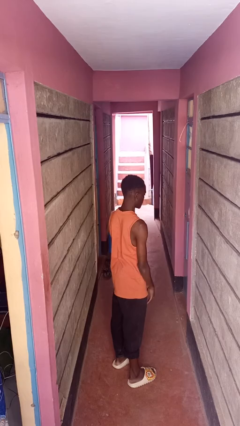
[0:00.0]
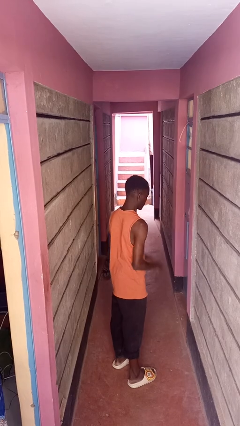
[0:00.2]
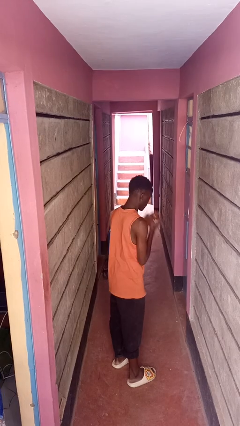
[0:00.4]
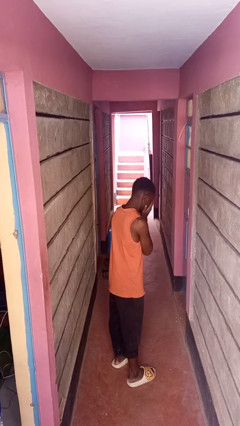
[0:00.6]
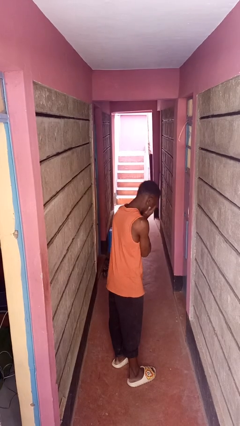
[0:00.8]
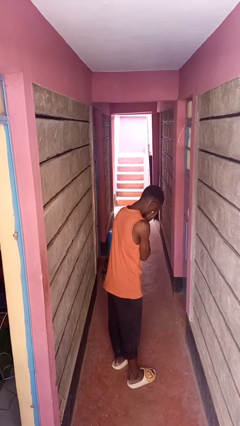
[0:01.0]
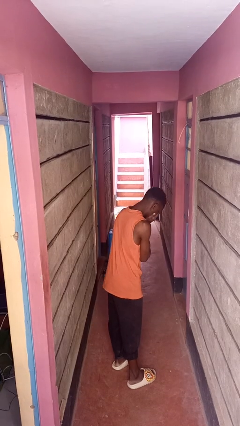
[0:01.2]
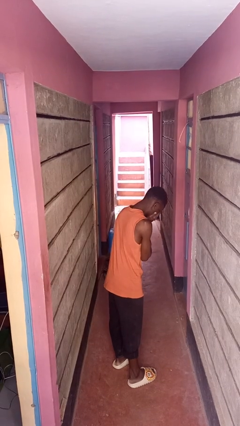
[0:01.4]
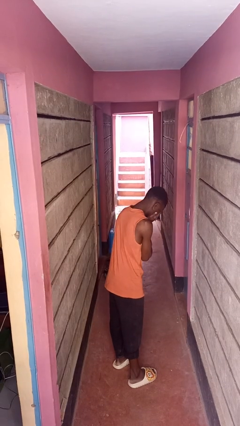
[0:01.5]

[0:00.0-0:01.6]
person sneezes into hand

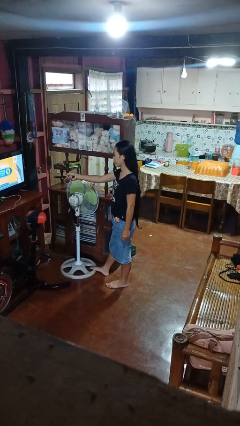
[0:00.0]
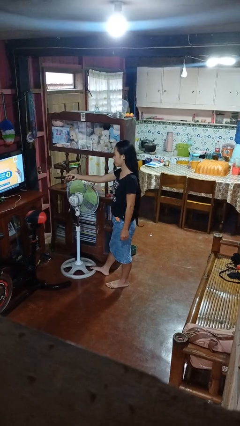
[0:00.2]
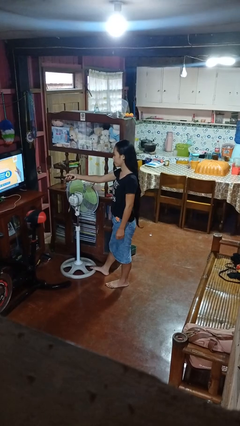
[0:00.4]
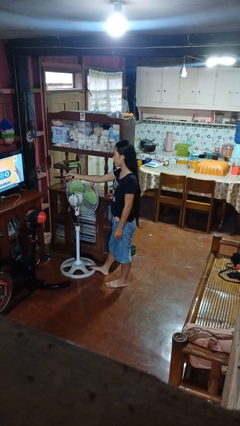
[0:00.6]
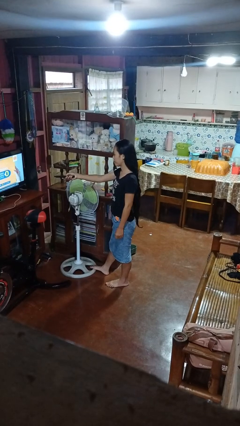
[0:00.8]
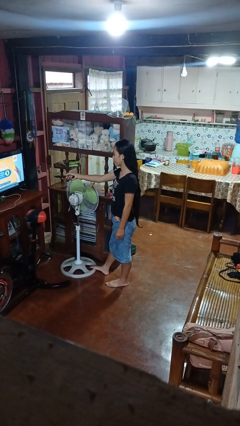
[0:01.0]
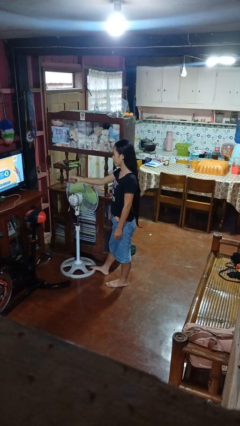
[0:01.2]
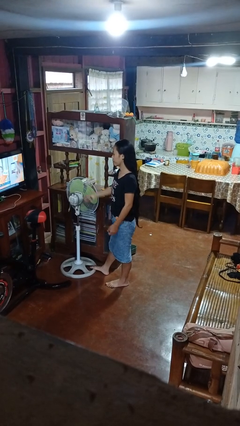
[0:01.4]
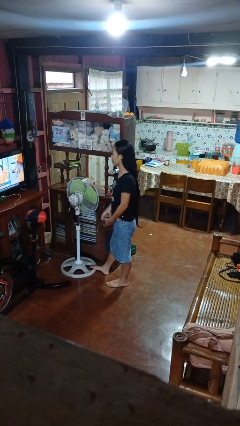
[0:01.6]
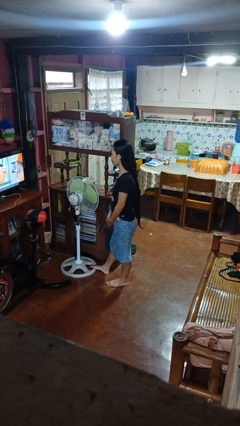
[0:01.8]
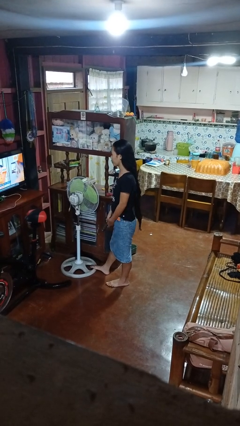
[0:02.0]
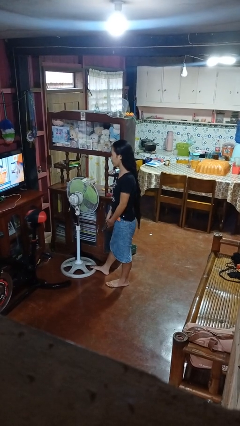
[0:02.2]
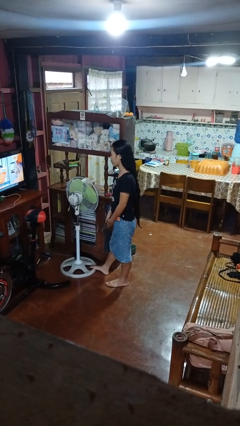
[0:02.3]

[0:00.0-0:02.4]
person uses television remote

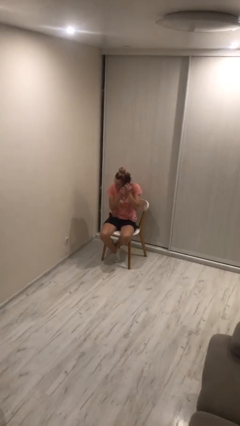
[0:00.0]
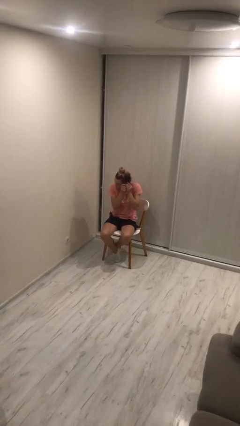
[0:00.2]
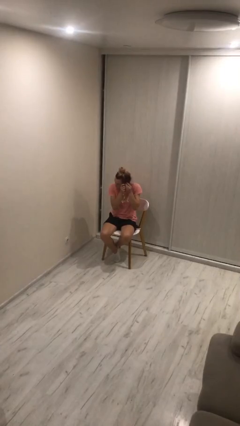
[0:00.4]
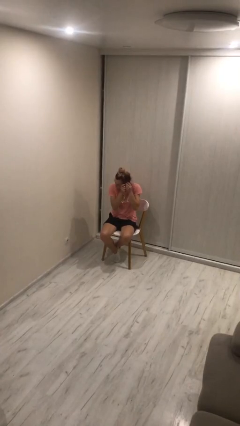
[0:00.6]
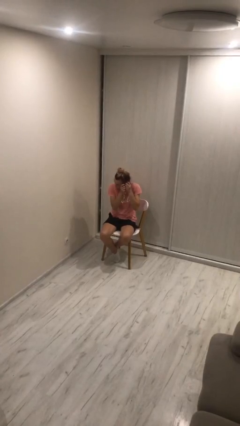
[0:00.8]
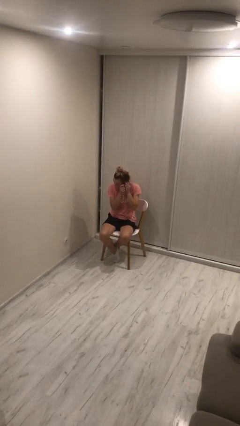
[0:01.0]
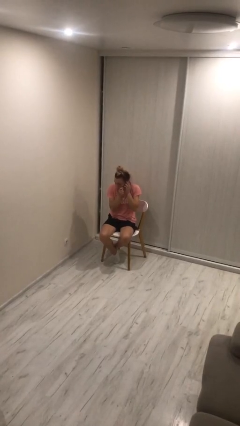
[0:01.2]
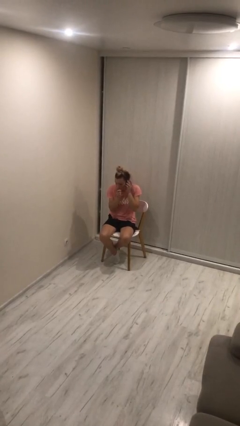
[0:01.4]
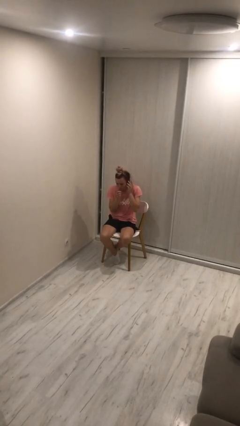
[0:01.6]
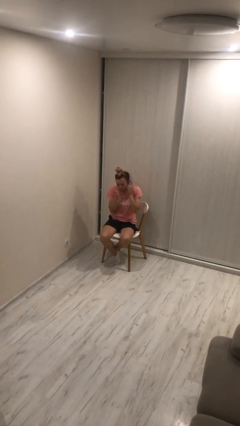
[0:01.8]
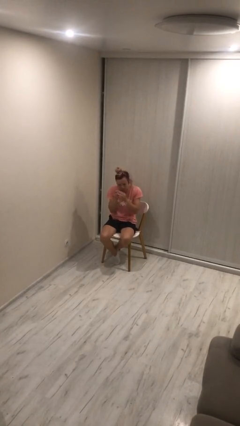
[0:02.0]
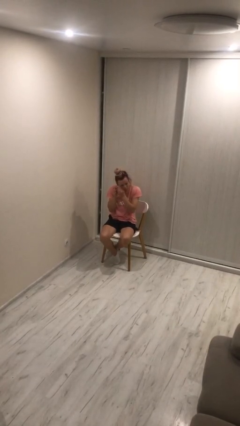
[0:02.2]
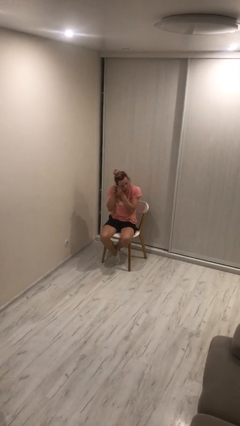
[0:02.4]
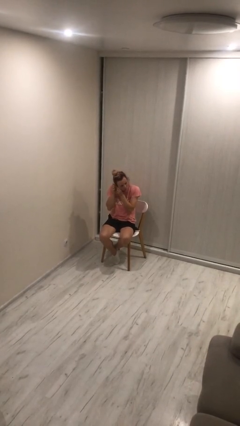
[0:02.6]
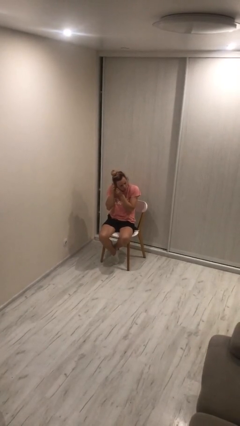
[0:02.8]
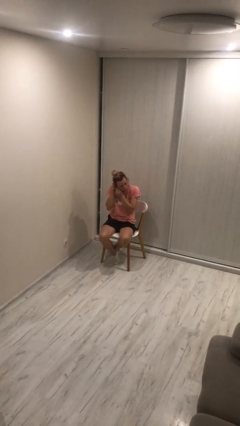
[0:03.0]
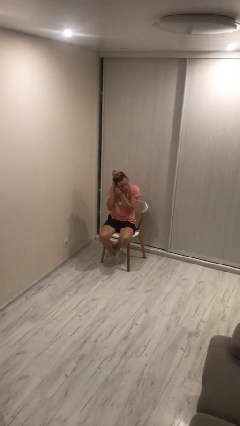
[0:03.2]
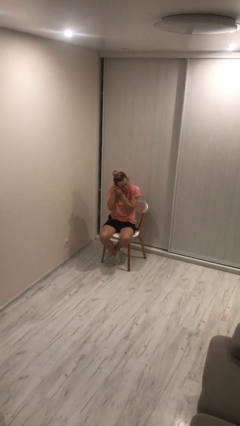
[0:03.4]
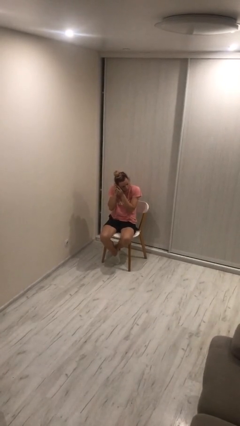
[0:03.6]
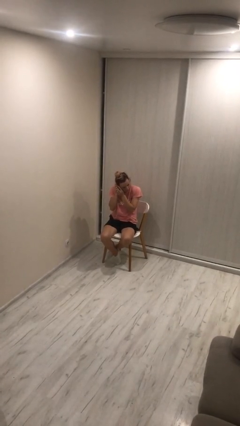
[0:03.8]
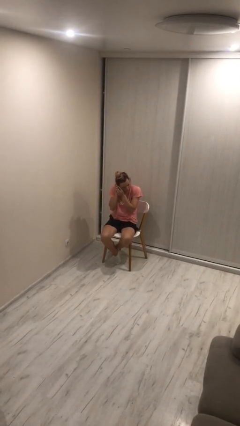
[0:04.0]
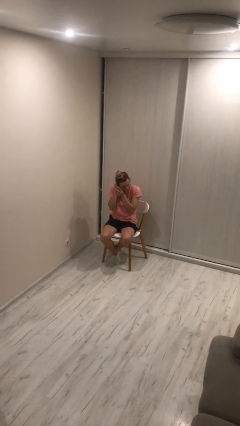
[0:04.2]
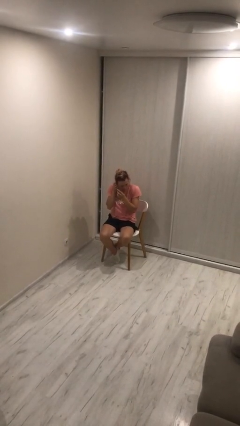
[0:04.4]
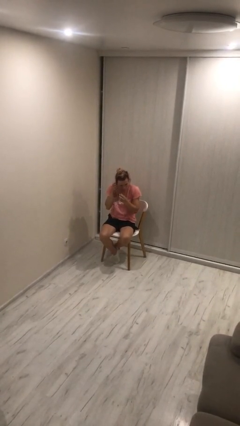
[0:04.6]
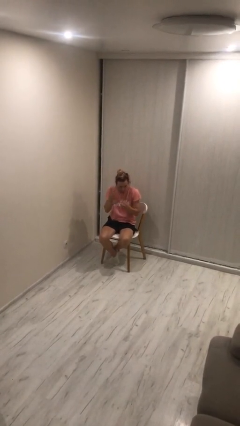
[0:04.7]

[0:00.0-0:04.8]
person puts on earrings

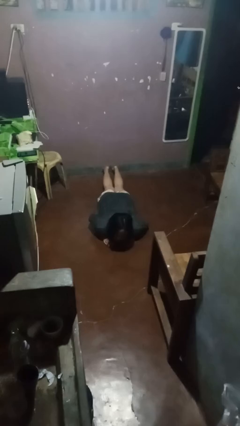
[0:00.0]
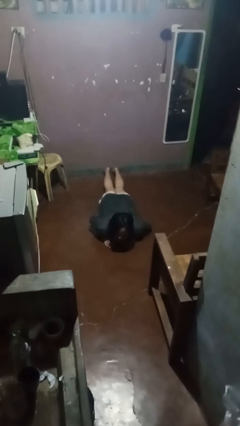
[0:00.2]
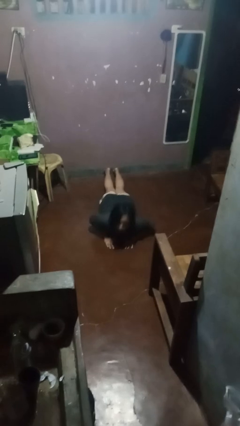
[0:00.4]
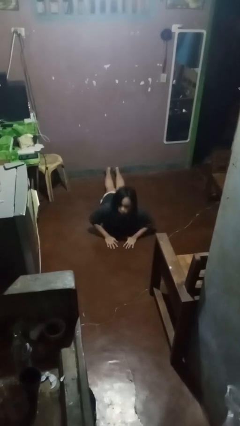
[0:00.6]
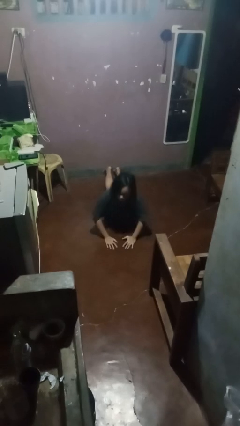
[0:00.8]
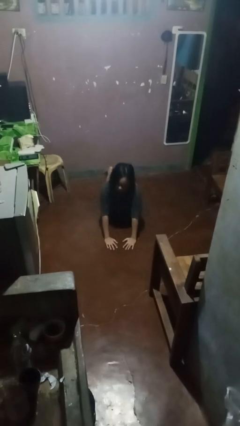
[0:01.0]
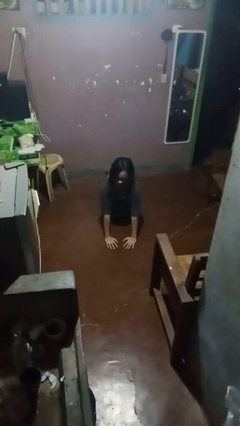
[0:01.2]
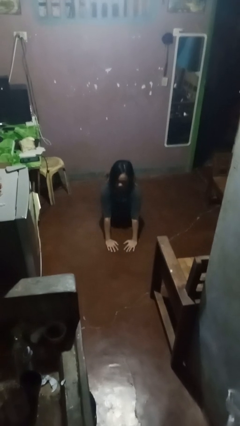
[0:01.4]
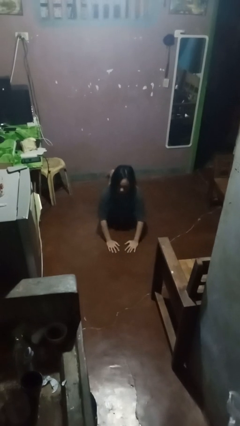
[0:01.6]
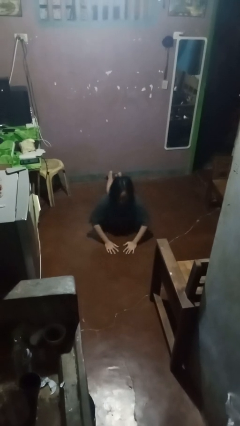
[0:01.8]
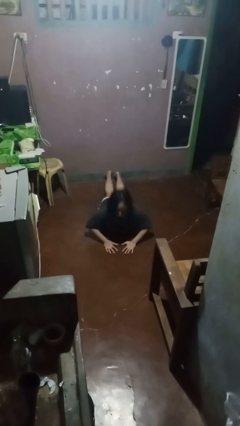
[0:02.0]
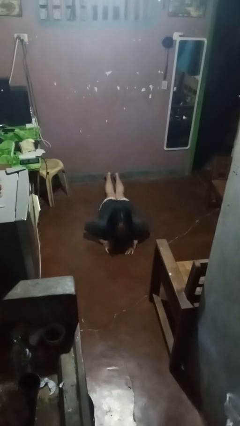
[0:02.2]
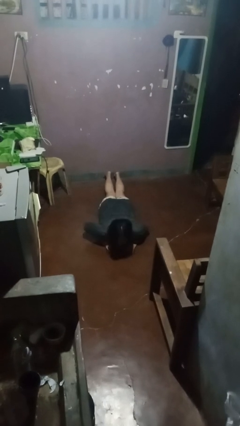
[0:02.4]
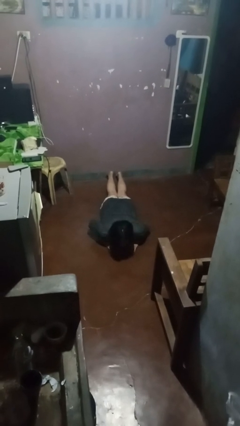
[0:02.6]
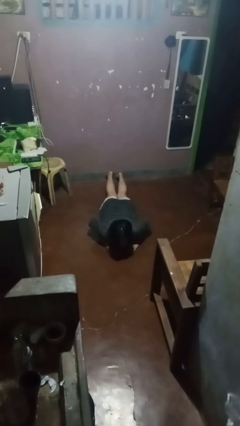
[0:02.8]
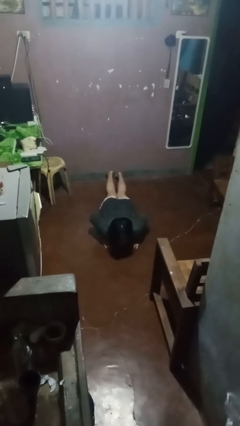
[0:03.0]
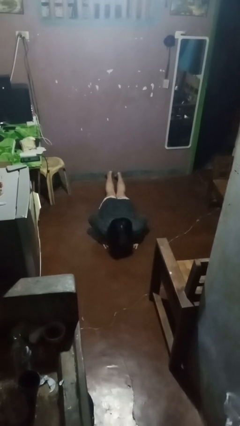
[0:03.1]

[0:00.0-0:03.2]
person exercises with pushup

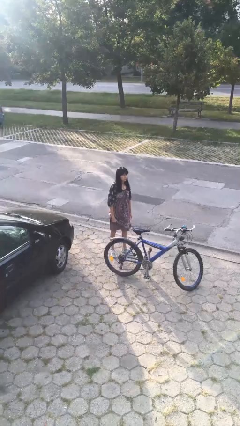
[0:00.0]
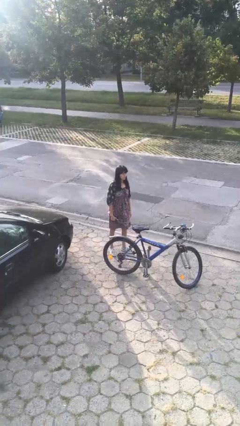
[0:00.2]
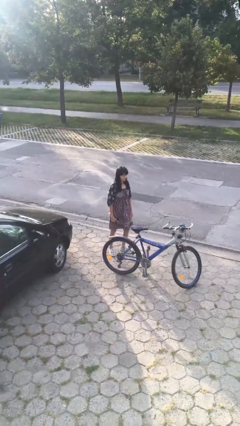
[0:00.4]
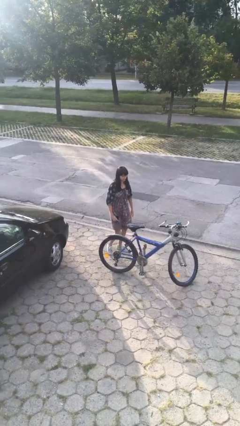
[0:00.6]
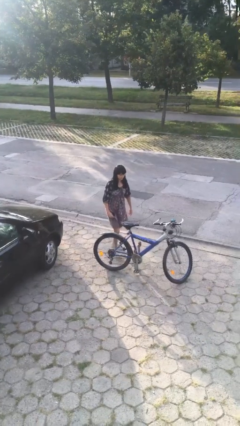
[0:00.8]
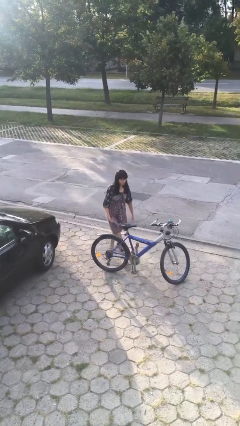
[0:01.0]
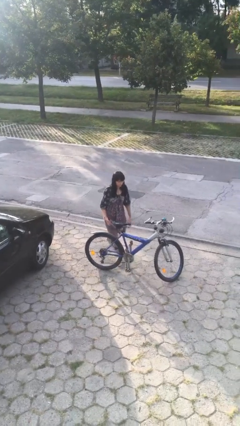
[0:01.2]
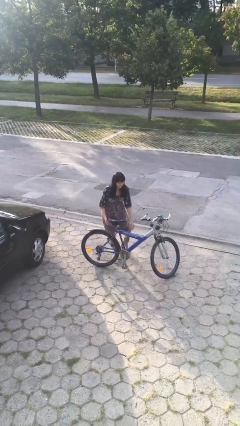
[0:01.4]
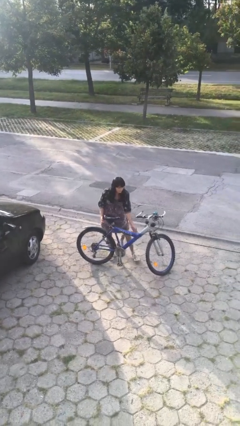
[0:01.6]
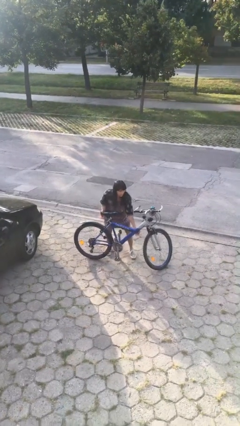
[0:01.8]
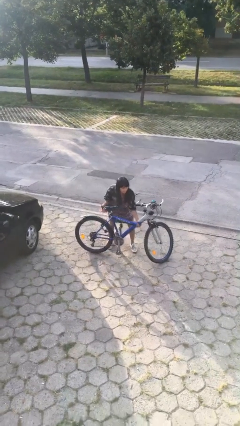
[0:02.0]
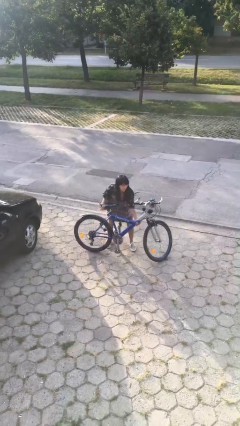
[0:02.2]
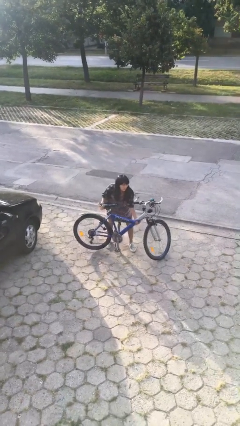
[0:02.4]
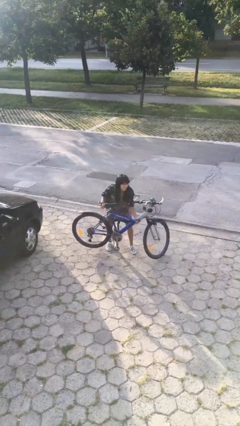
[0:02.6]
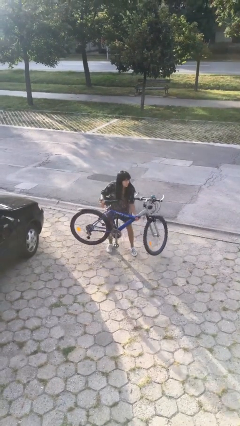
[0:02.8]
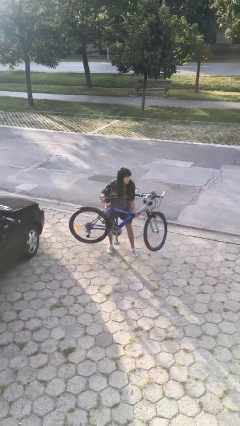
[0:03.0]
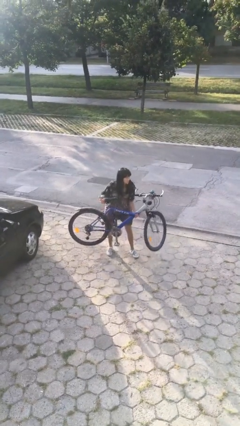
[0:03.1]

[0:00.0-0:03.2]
person picks up object from floor

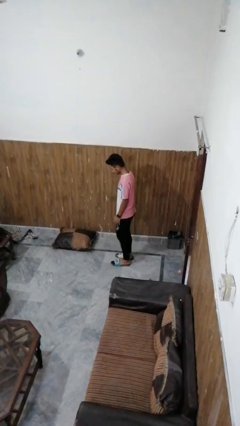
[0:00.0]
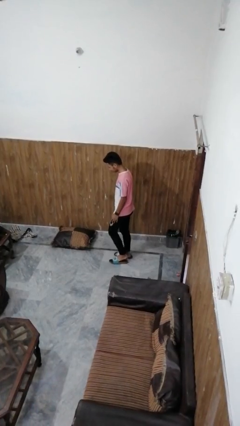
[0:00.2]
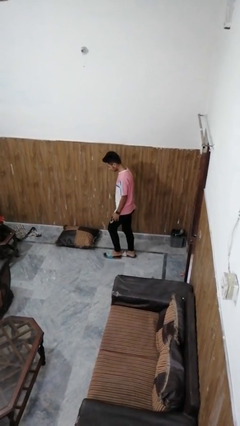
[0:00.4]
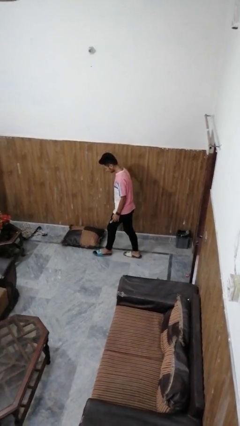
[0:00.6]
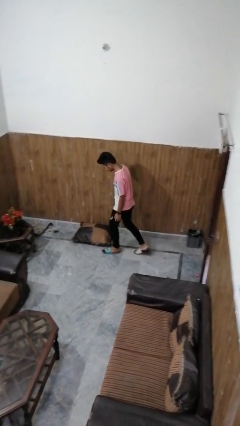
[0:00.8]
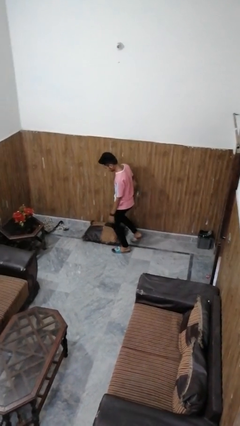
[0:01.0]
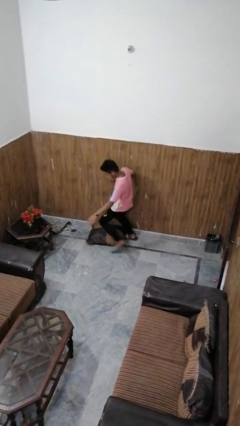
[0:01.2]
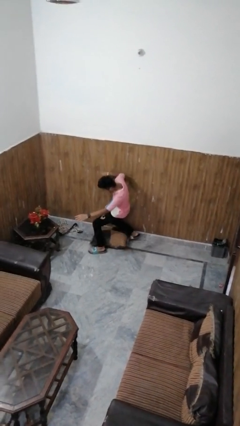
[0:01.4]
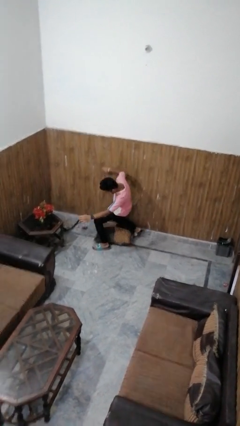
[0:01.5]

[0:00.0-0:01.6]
person trips on object on floor

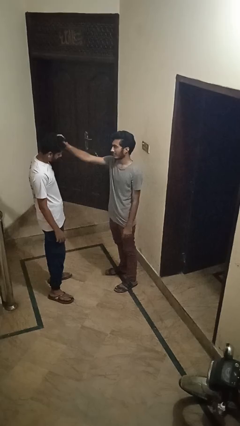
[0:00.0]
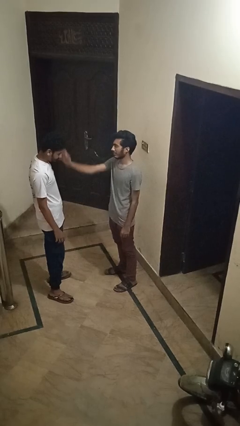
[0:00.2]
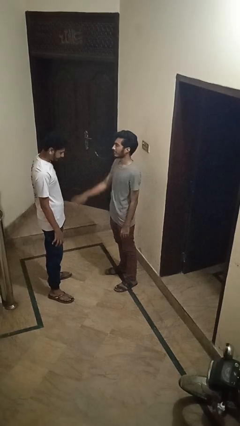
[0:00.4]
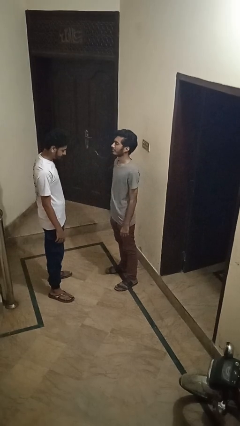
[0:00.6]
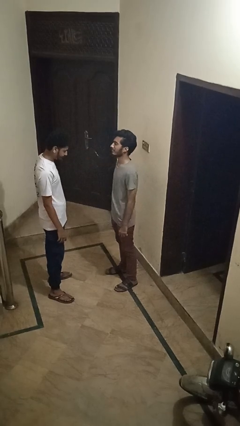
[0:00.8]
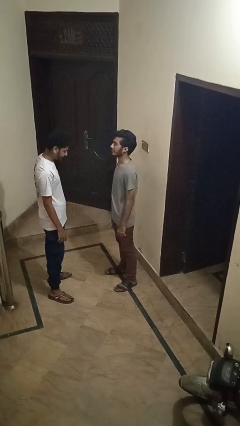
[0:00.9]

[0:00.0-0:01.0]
person grabs person by hair
